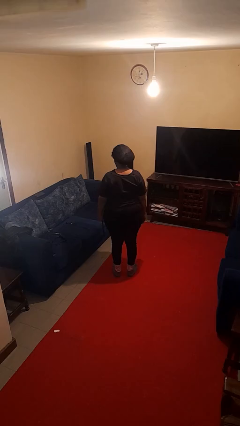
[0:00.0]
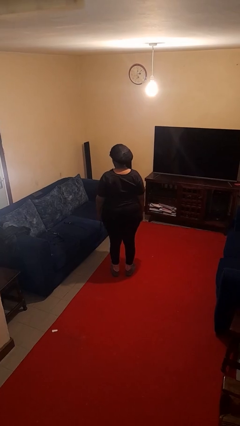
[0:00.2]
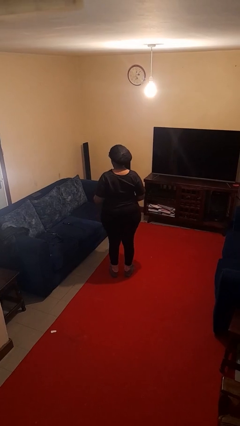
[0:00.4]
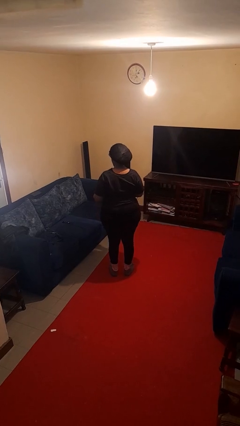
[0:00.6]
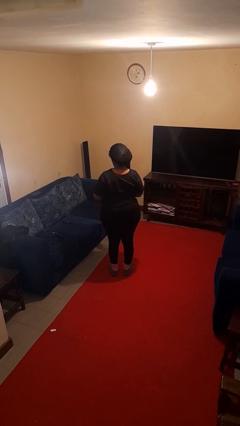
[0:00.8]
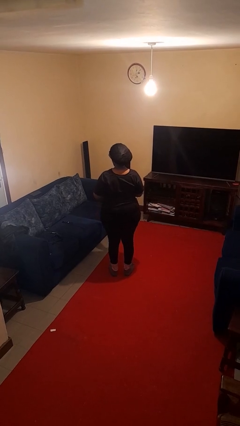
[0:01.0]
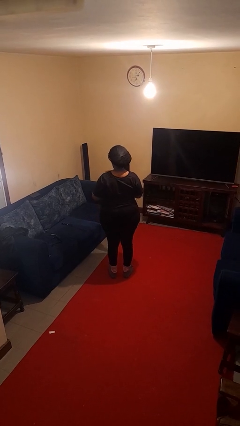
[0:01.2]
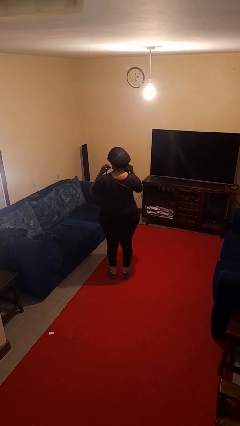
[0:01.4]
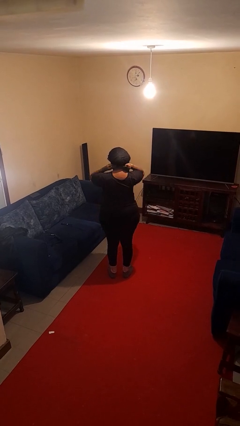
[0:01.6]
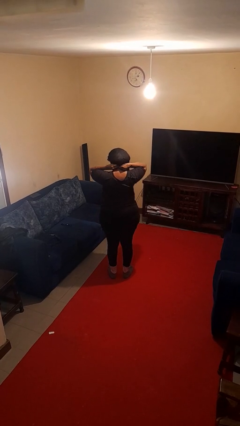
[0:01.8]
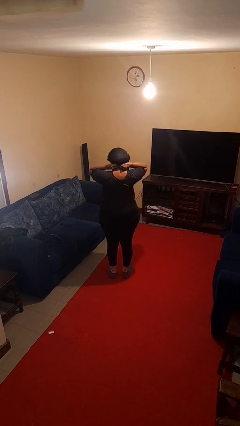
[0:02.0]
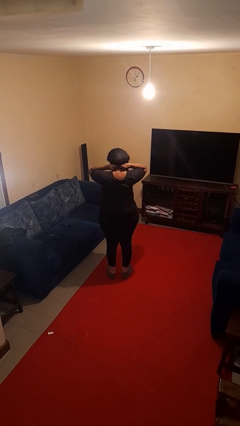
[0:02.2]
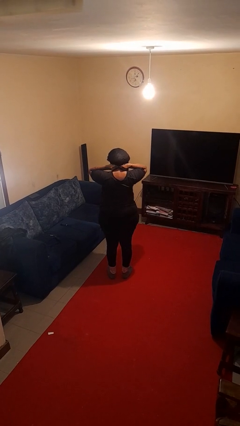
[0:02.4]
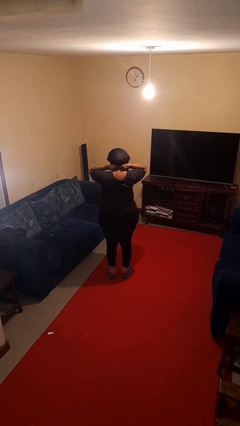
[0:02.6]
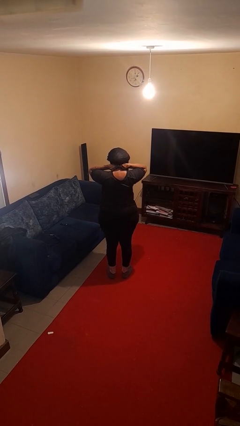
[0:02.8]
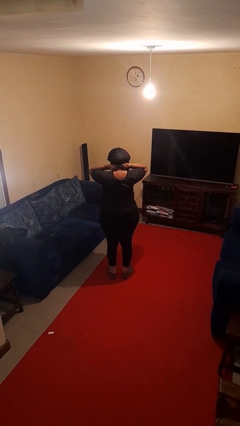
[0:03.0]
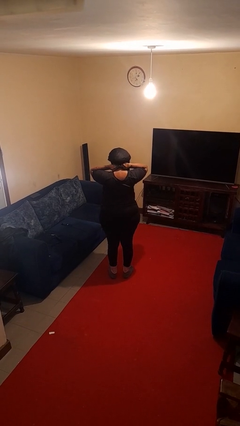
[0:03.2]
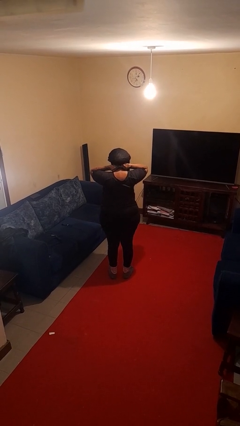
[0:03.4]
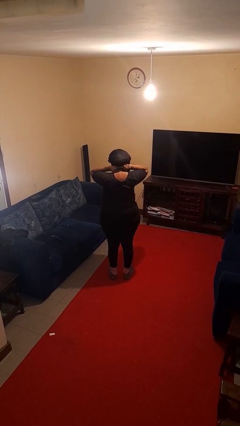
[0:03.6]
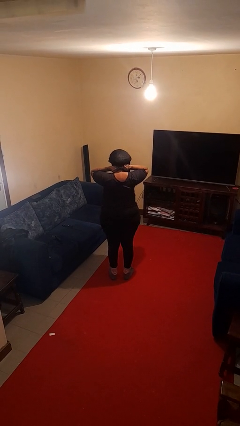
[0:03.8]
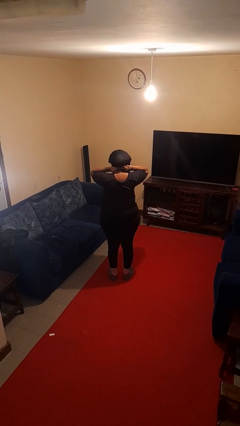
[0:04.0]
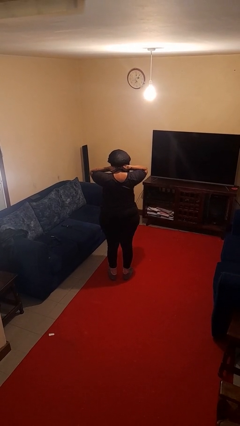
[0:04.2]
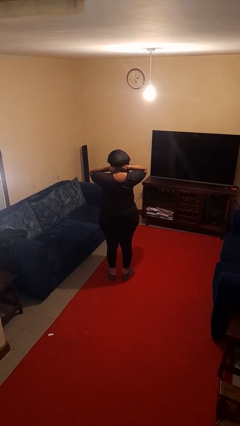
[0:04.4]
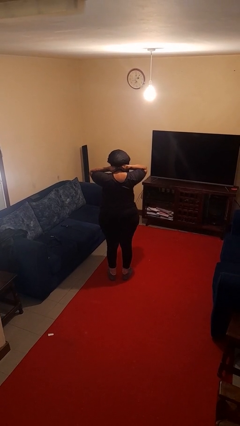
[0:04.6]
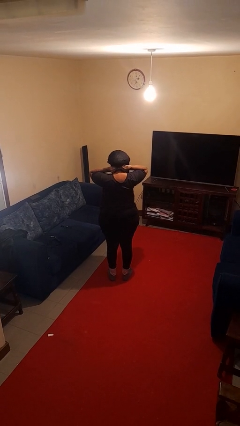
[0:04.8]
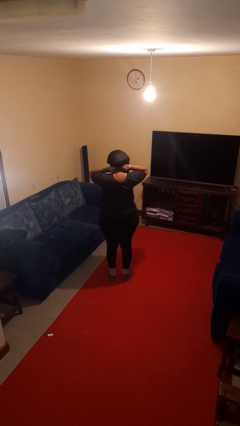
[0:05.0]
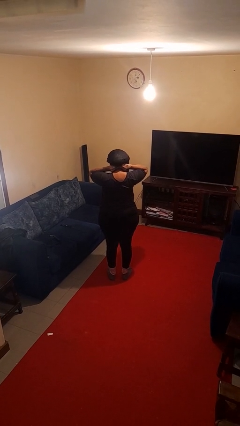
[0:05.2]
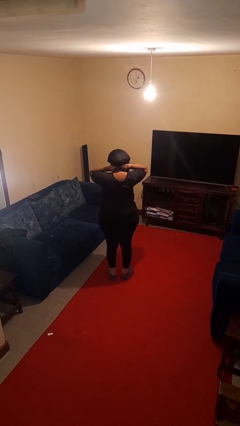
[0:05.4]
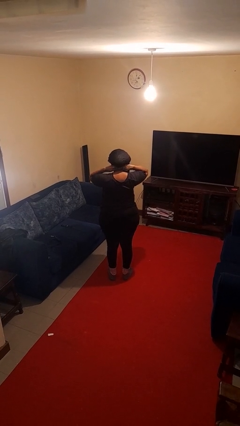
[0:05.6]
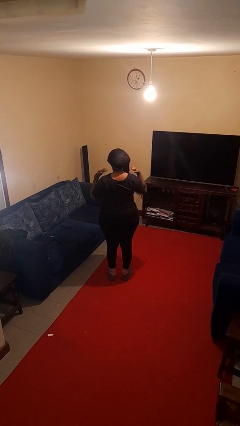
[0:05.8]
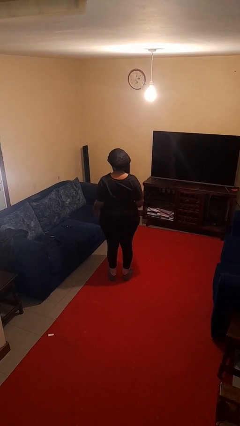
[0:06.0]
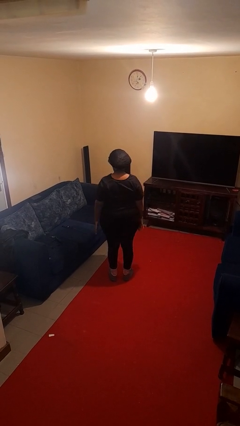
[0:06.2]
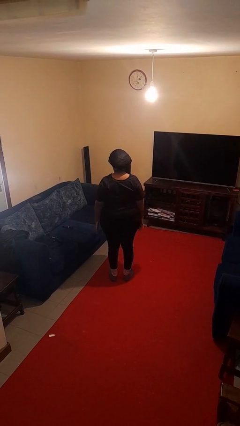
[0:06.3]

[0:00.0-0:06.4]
person puts on necklace

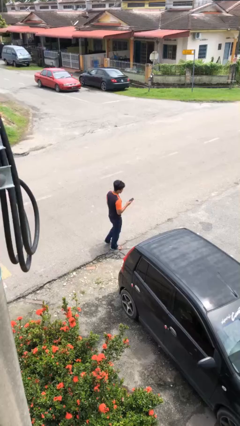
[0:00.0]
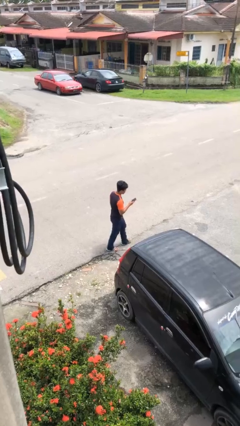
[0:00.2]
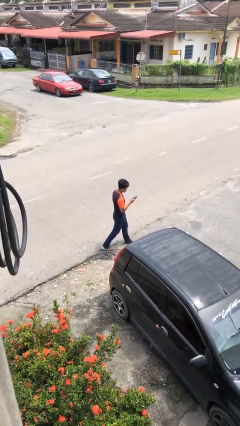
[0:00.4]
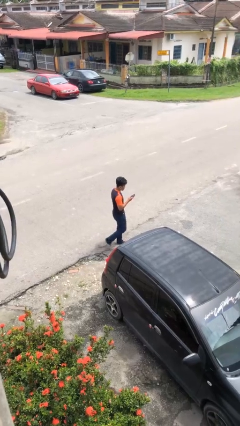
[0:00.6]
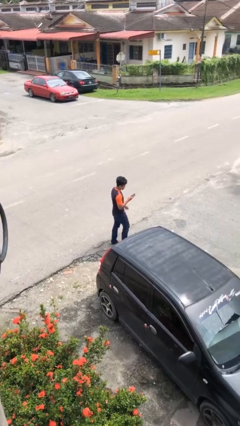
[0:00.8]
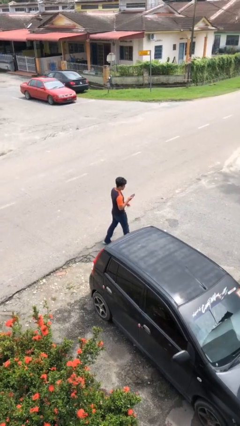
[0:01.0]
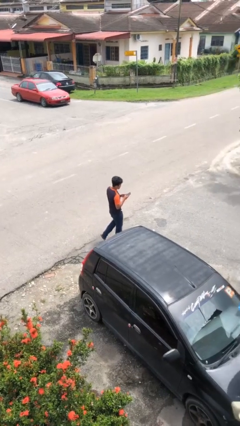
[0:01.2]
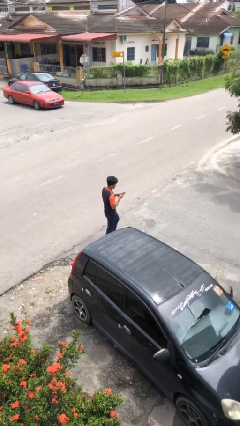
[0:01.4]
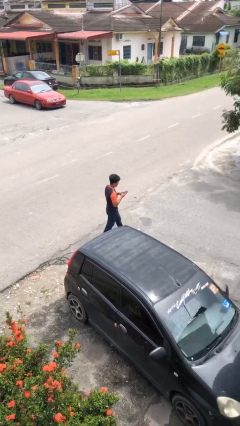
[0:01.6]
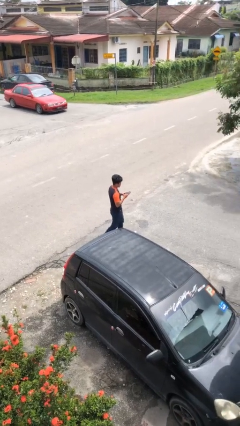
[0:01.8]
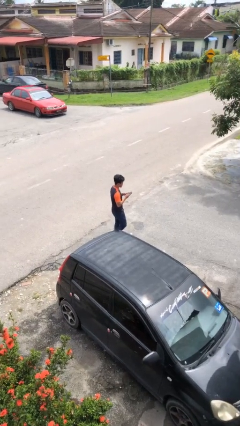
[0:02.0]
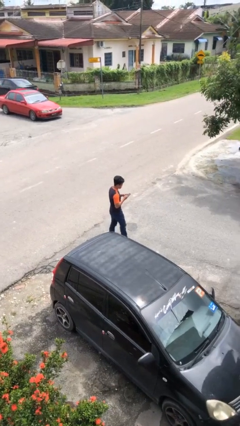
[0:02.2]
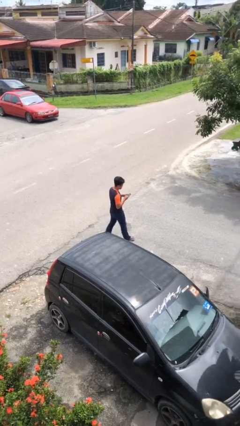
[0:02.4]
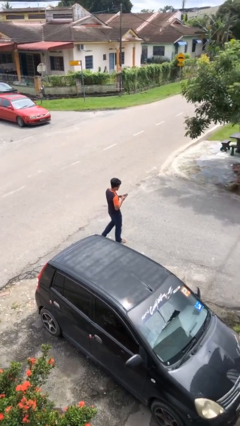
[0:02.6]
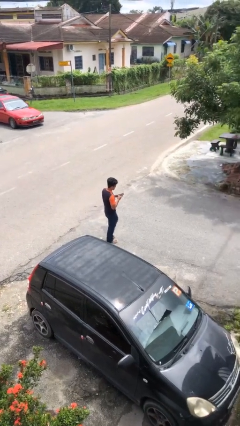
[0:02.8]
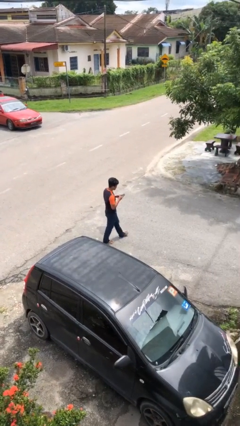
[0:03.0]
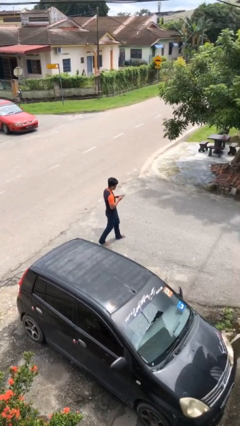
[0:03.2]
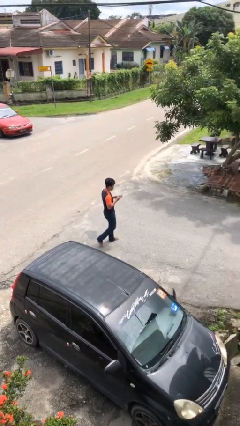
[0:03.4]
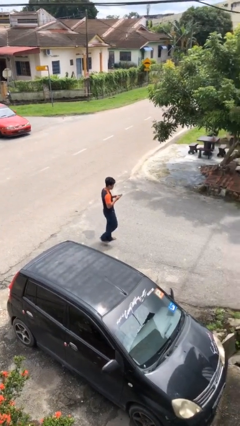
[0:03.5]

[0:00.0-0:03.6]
person texts on phone

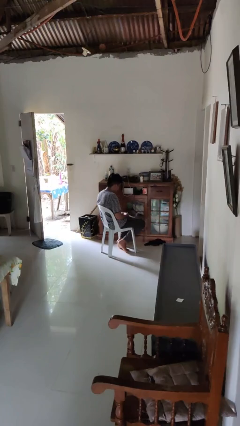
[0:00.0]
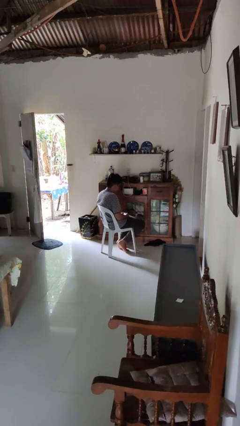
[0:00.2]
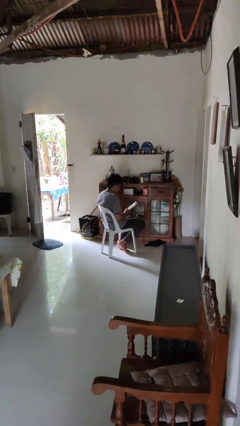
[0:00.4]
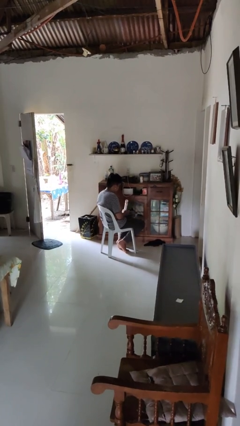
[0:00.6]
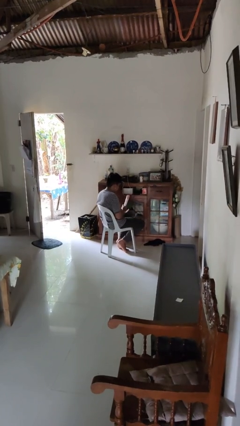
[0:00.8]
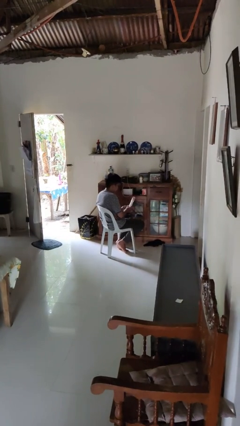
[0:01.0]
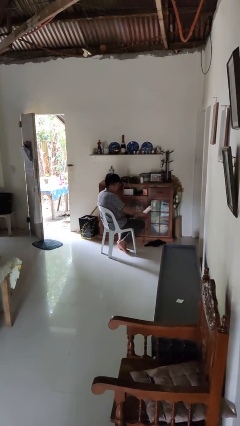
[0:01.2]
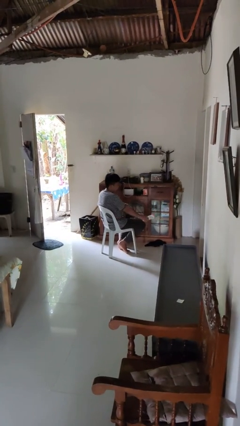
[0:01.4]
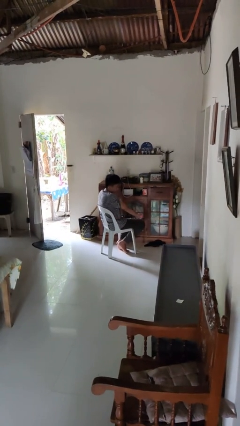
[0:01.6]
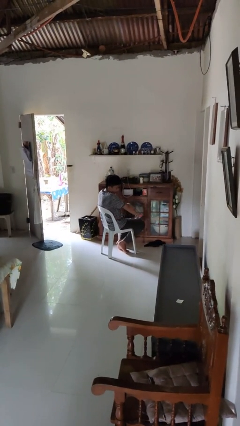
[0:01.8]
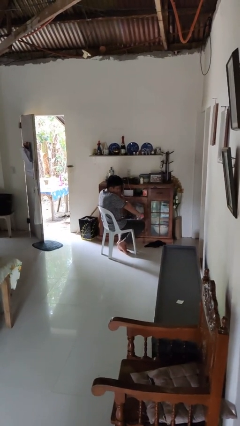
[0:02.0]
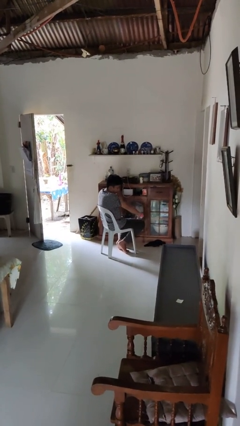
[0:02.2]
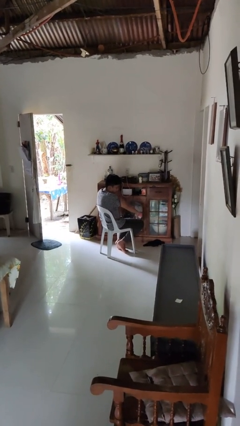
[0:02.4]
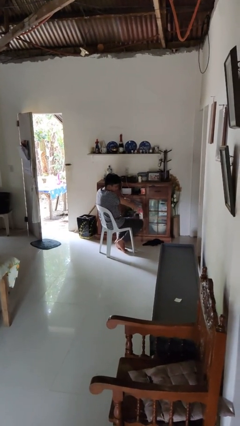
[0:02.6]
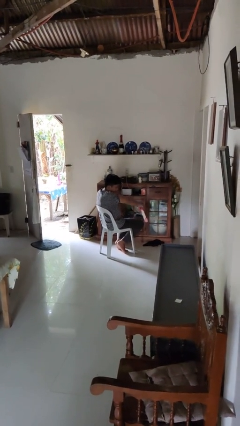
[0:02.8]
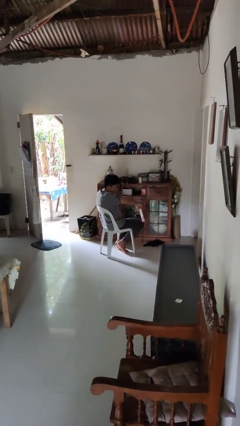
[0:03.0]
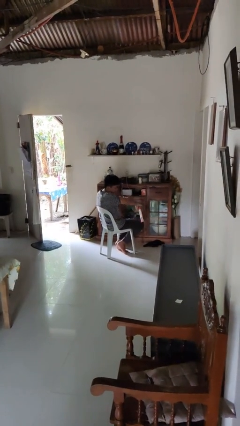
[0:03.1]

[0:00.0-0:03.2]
person applies sunscreen

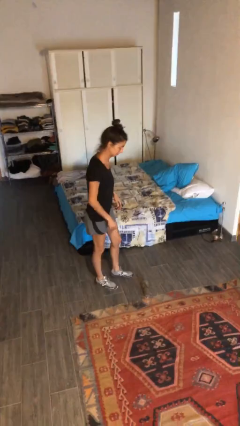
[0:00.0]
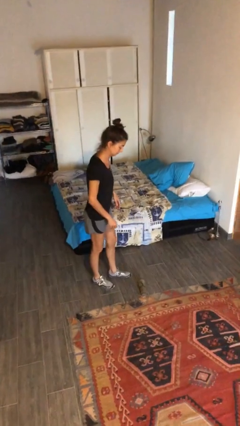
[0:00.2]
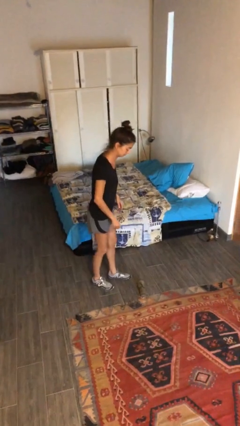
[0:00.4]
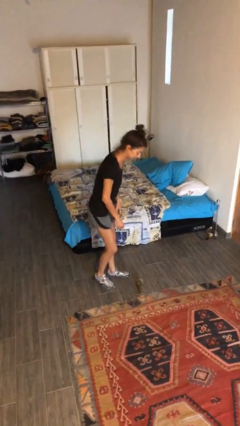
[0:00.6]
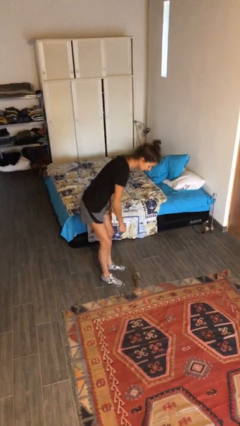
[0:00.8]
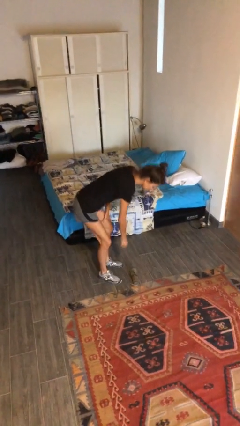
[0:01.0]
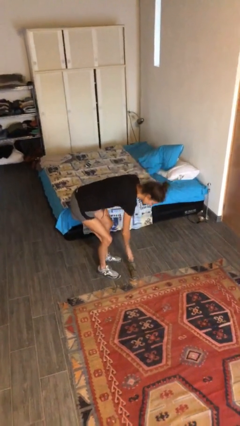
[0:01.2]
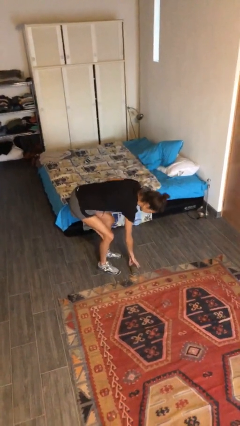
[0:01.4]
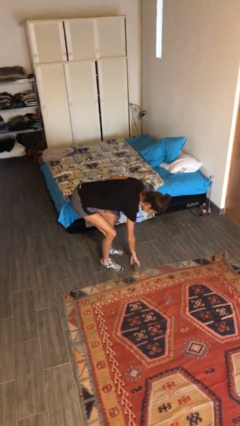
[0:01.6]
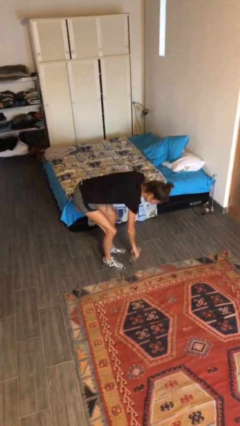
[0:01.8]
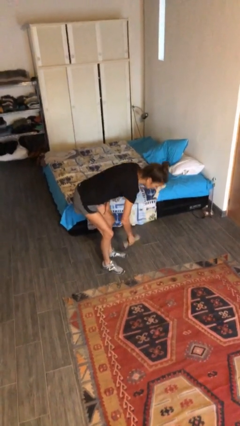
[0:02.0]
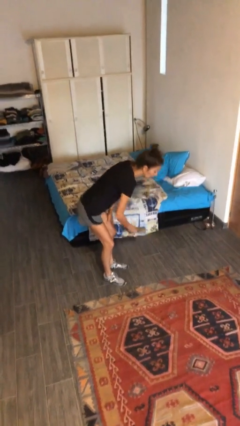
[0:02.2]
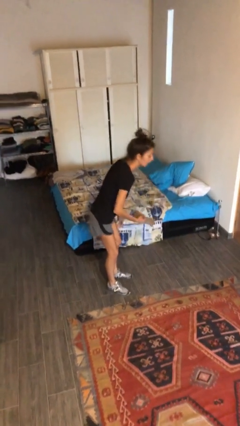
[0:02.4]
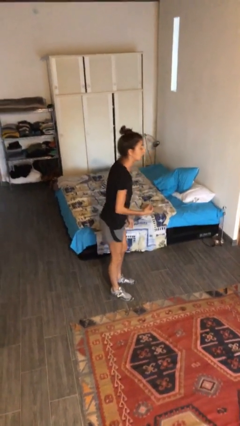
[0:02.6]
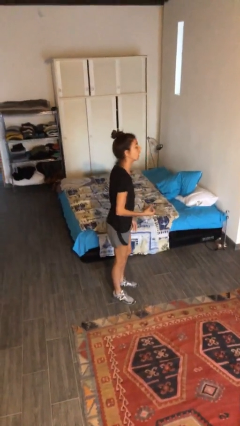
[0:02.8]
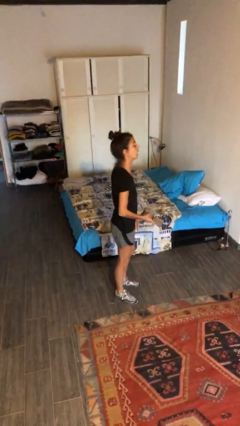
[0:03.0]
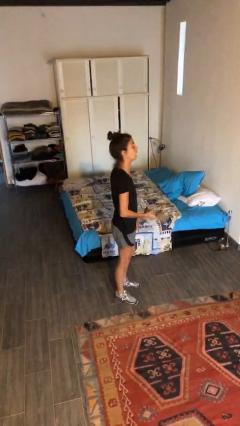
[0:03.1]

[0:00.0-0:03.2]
person picks up object from floor

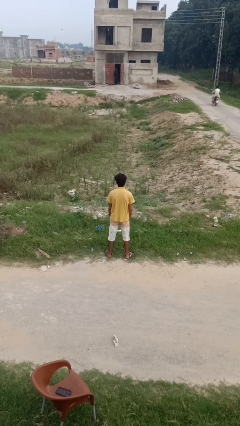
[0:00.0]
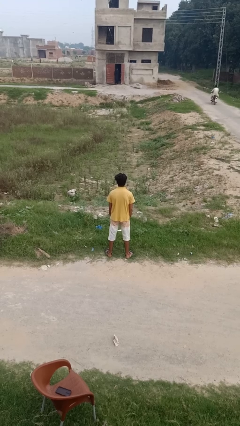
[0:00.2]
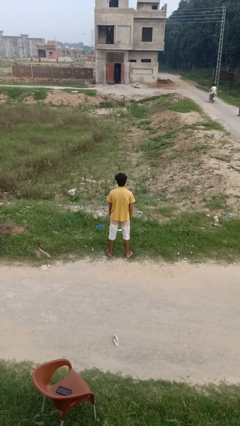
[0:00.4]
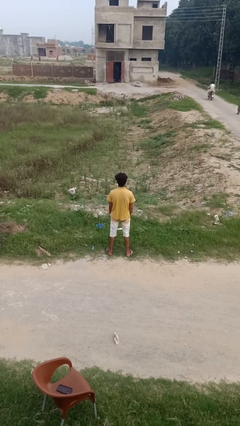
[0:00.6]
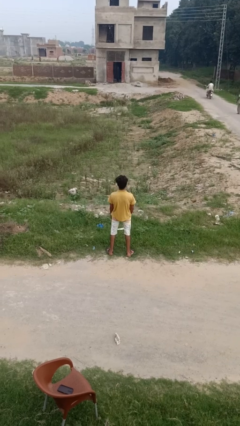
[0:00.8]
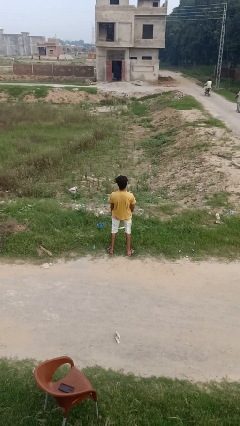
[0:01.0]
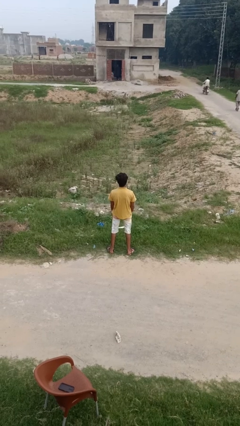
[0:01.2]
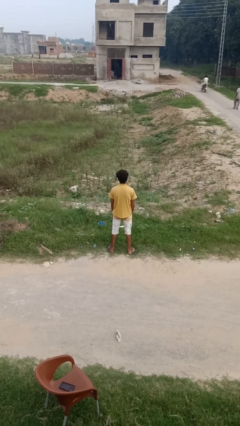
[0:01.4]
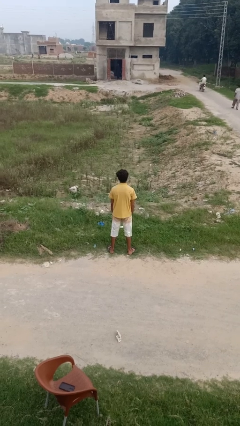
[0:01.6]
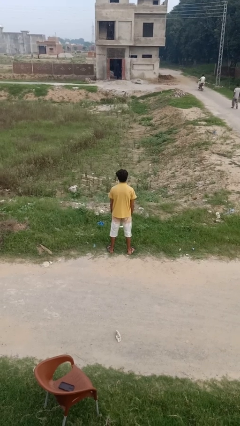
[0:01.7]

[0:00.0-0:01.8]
person wiggles hips
